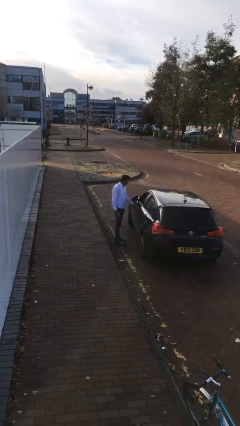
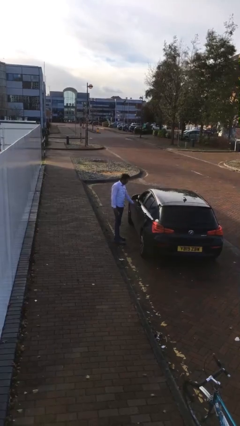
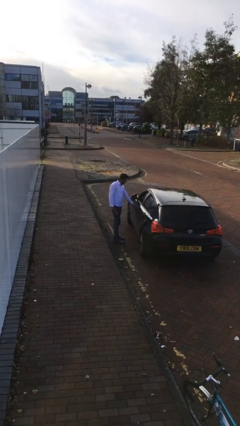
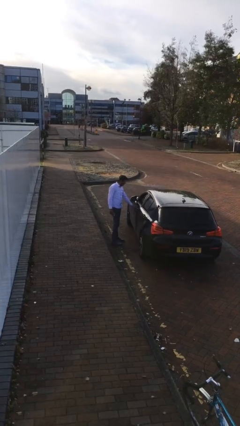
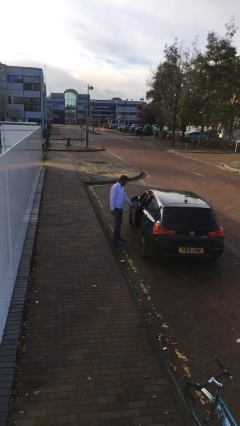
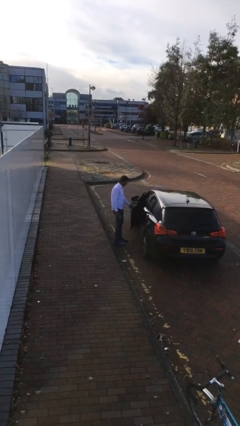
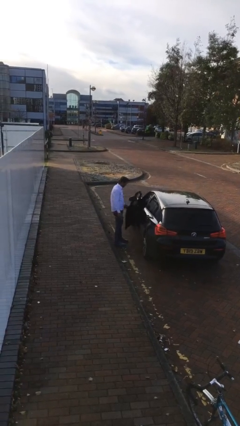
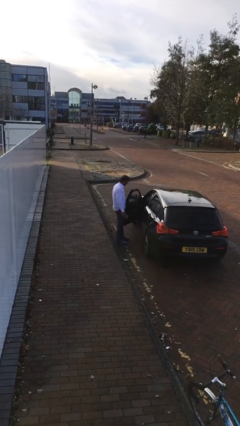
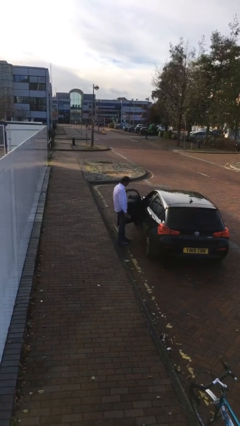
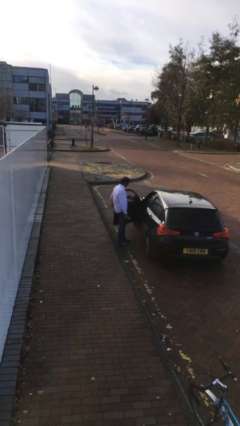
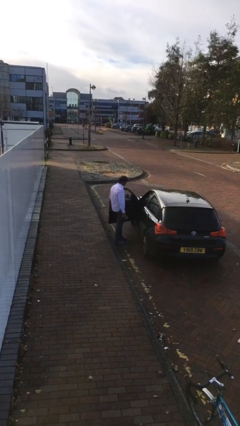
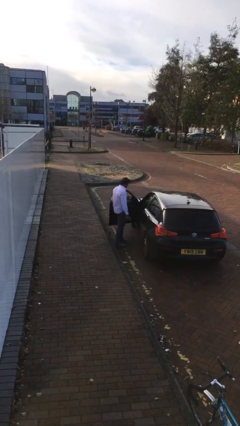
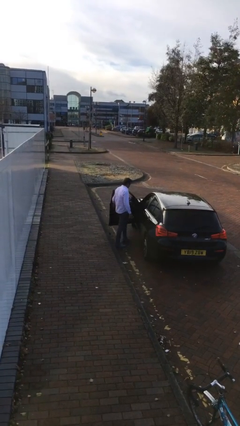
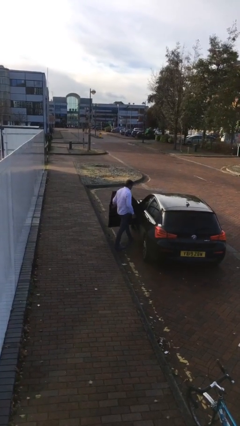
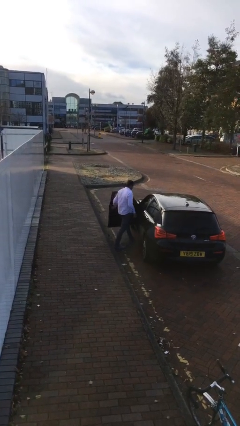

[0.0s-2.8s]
person opens car door

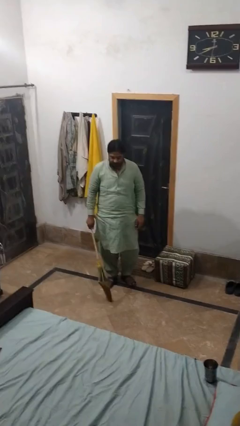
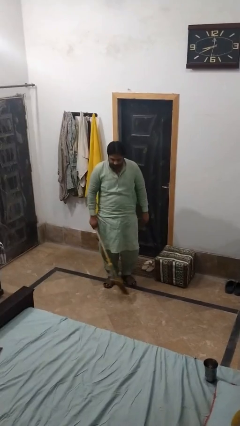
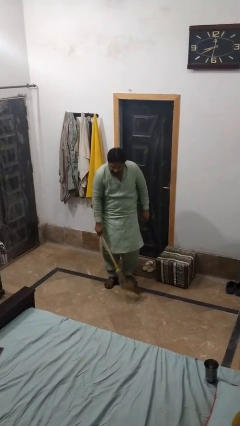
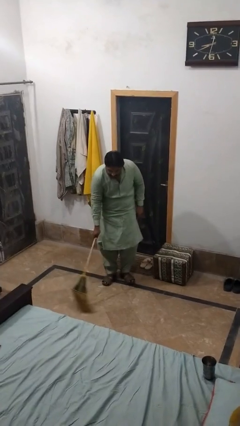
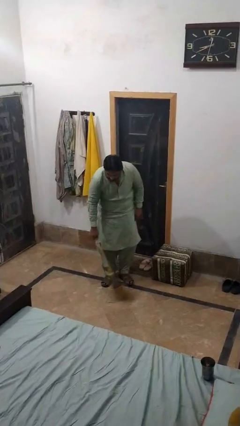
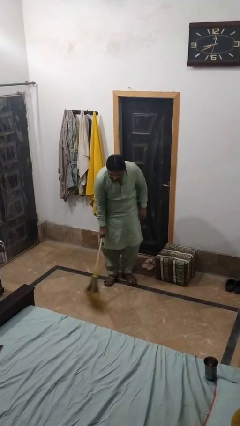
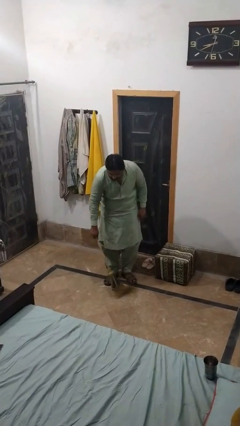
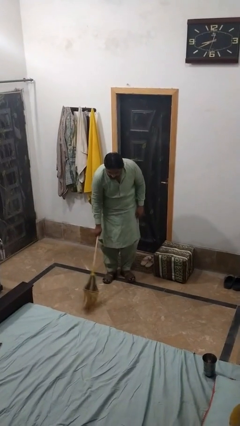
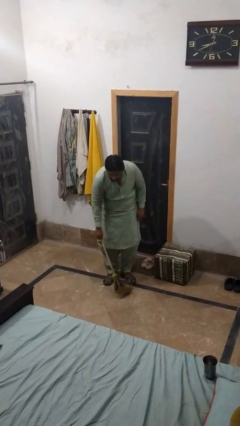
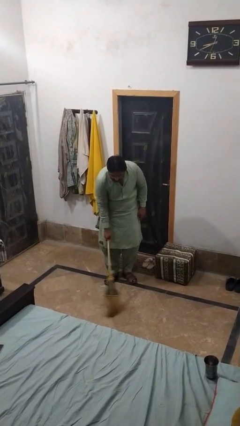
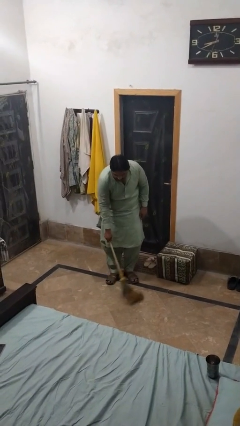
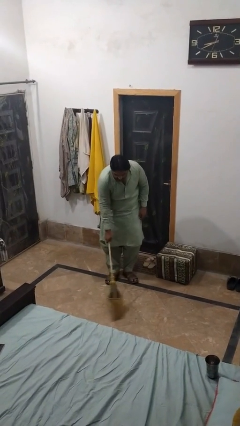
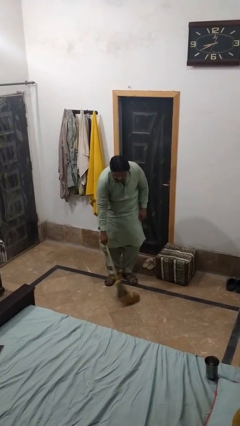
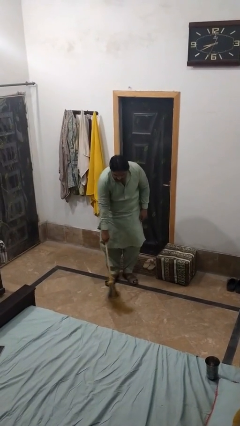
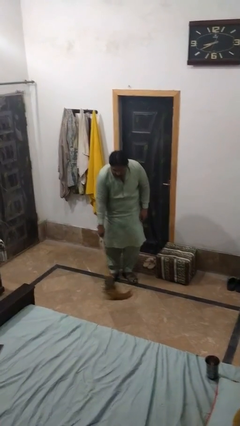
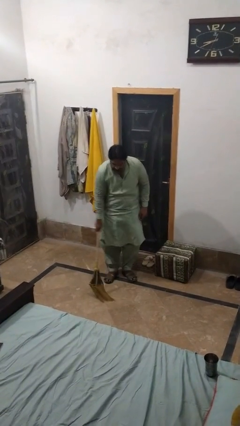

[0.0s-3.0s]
person mops

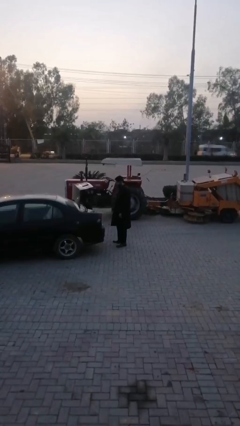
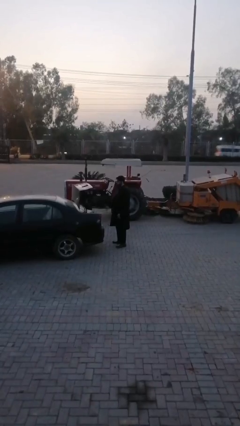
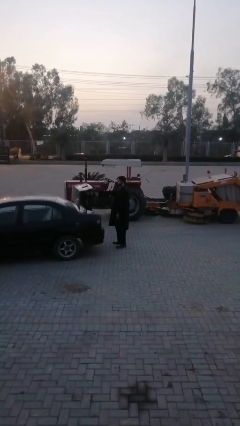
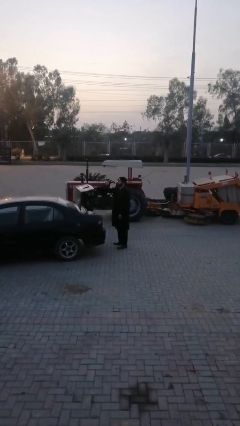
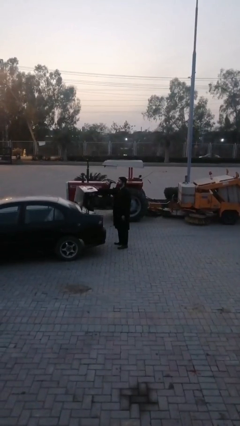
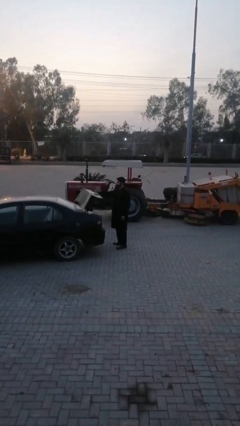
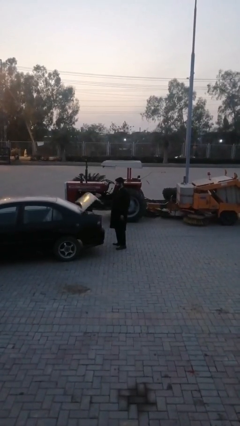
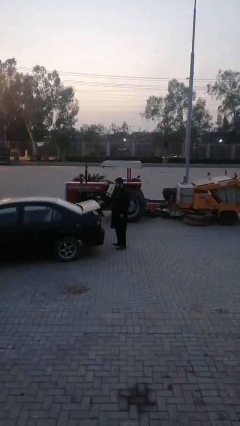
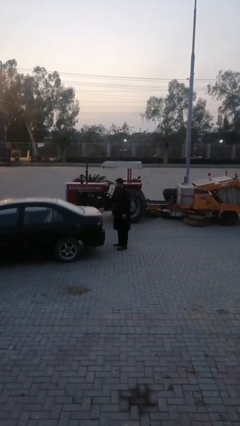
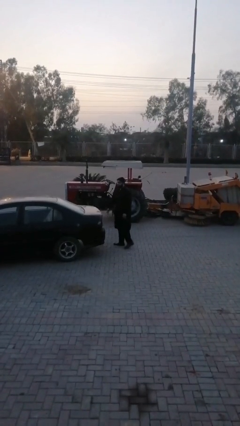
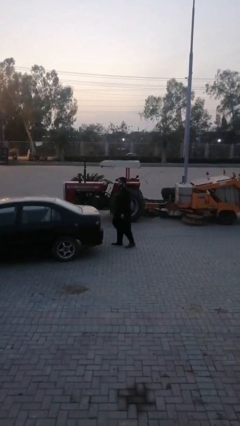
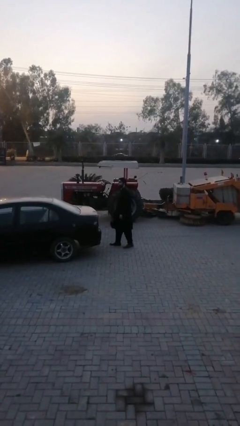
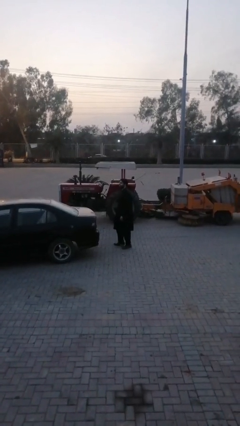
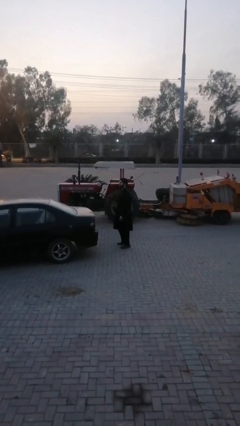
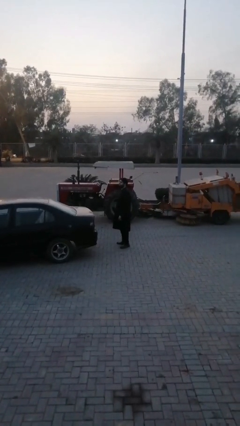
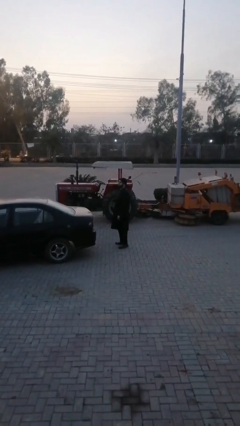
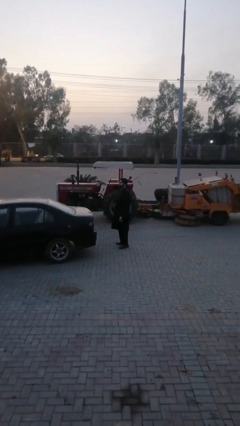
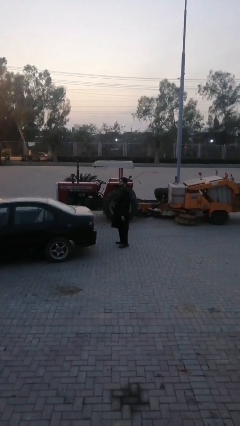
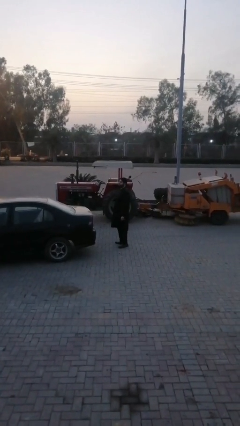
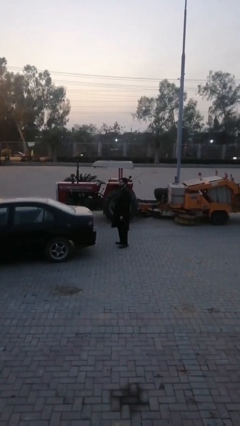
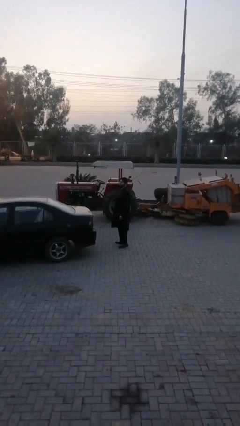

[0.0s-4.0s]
person closes car trunk

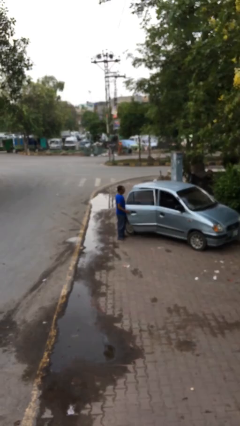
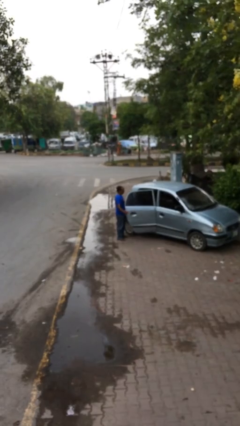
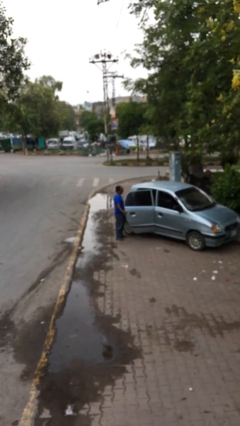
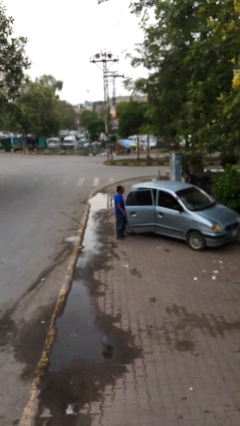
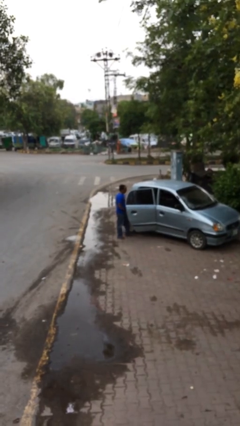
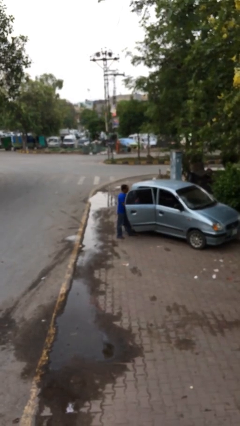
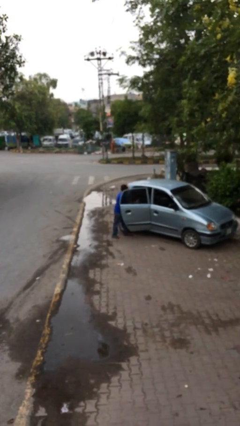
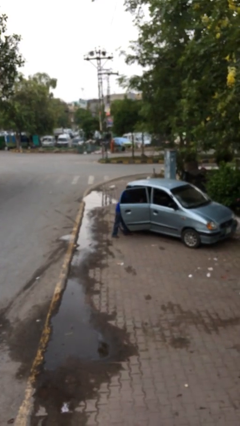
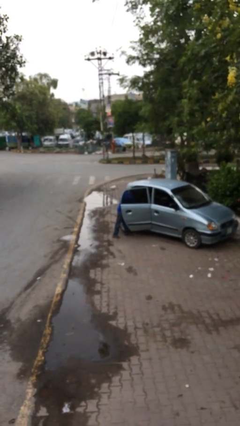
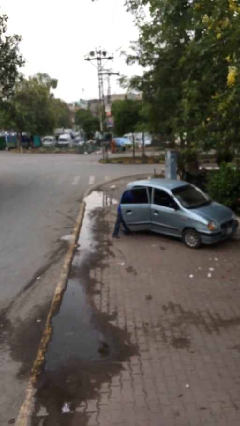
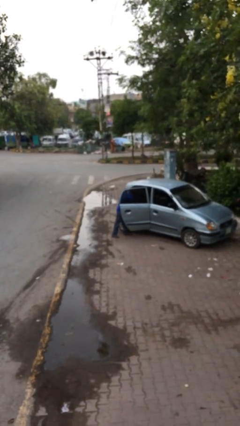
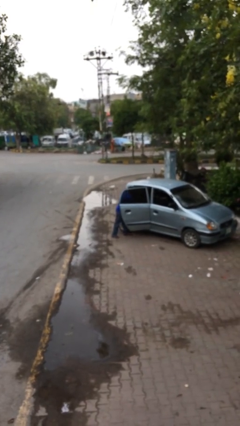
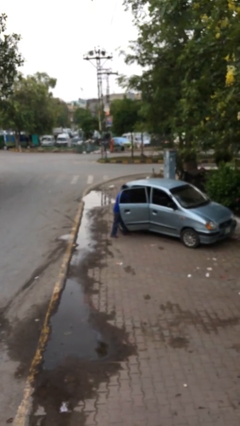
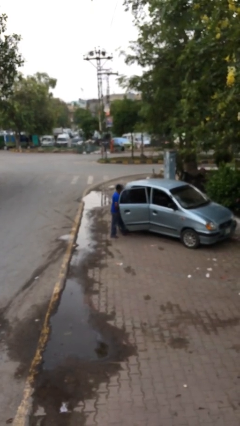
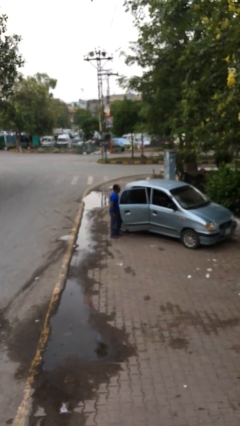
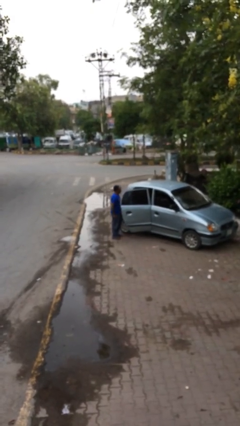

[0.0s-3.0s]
person loads car

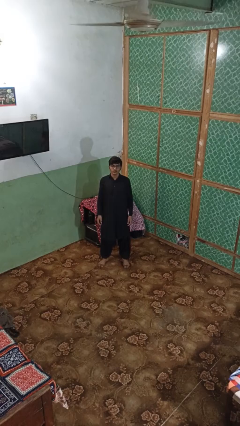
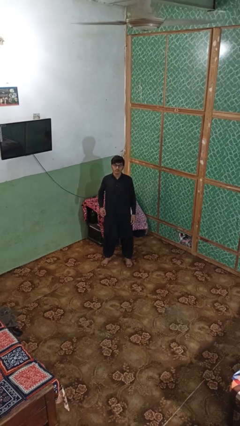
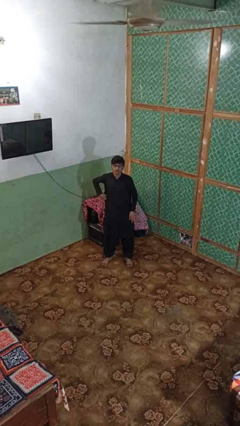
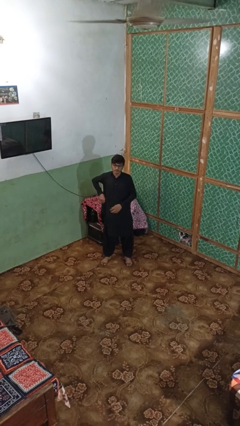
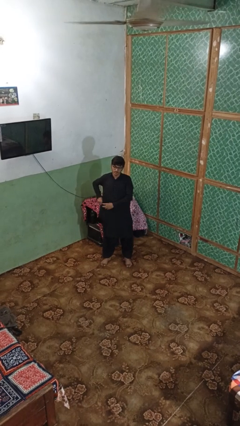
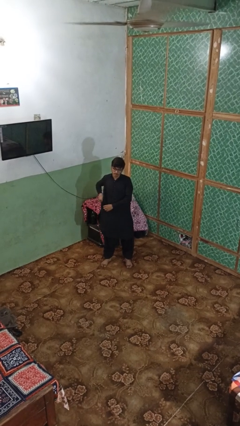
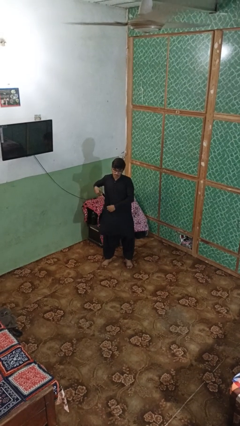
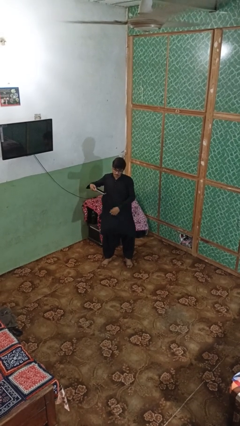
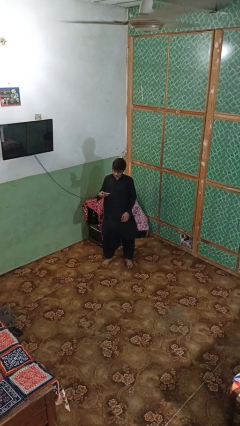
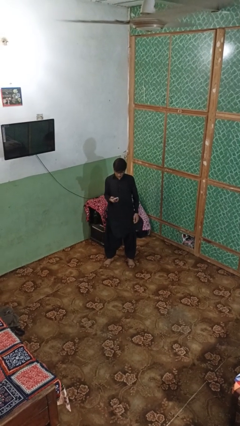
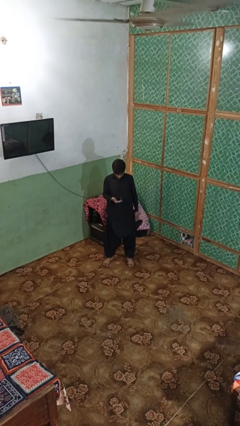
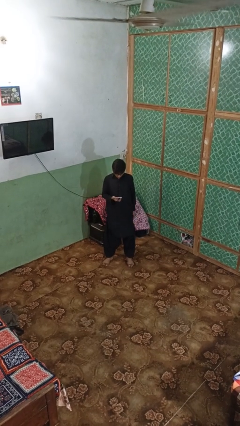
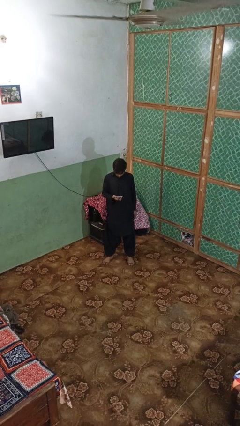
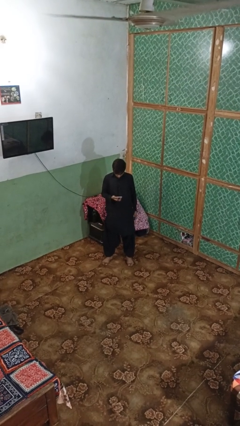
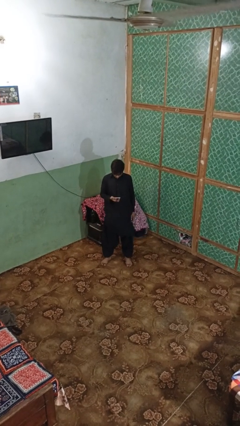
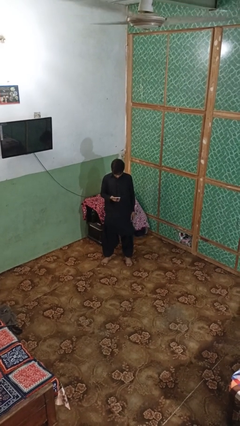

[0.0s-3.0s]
person takes phone from pocket

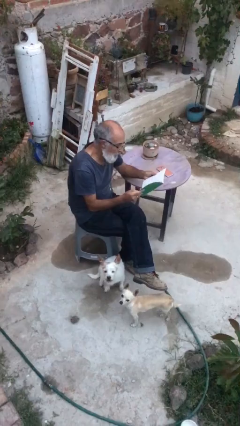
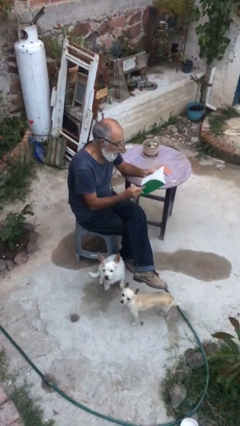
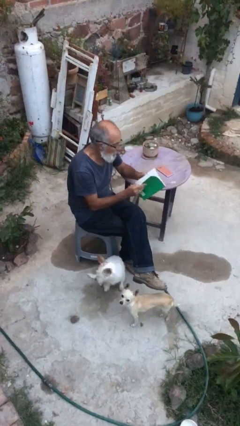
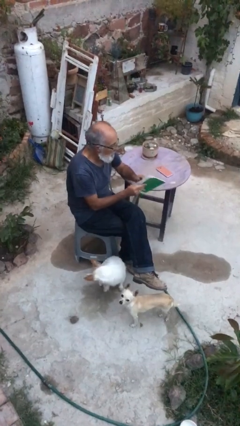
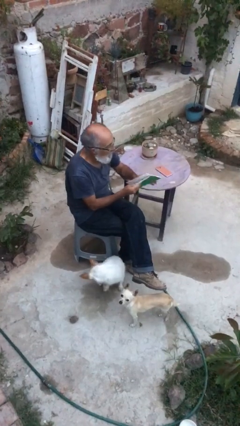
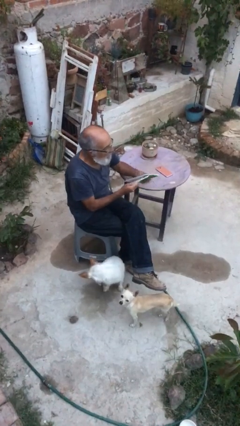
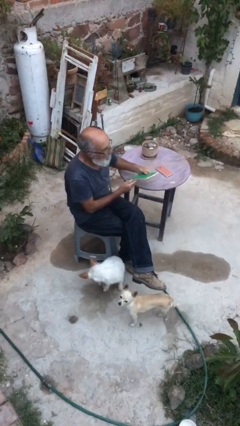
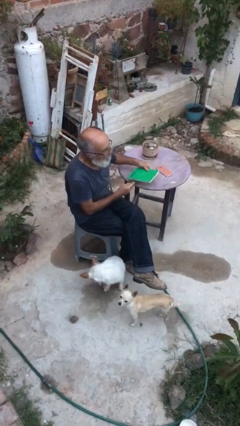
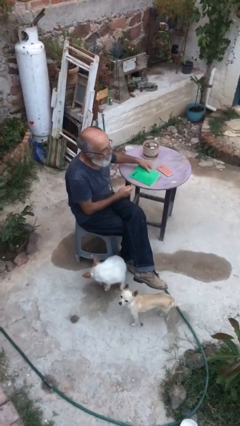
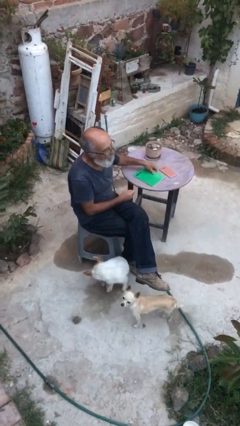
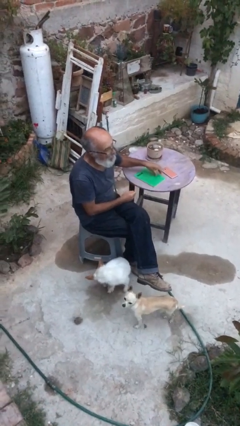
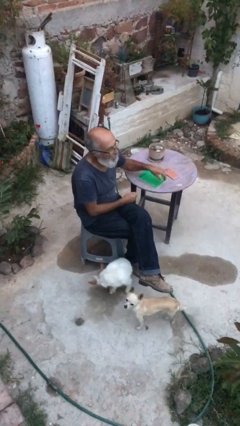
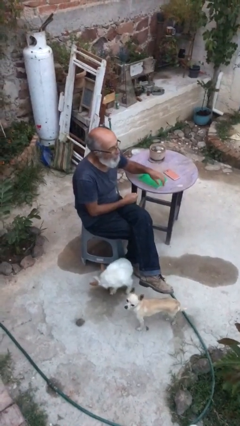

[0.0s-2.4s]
person puts down object on table
